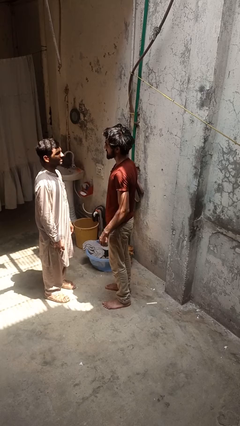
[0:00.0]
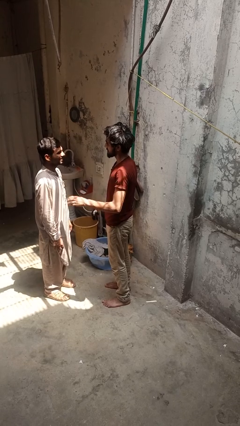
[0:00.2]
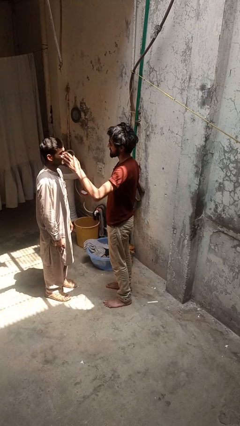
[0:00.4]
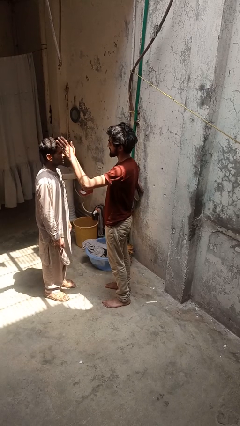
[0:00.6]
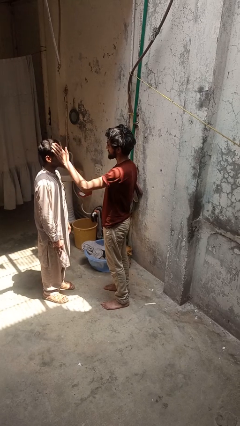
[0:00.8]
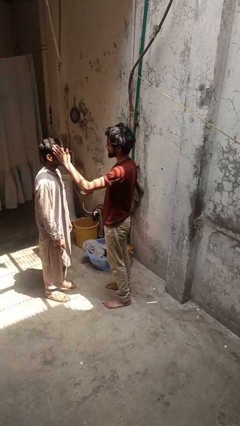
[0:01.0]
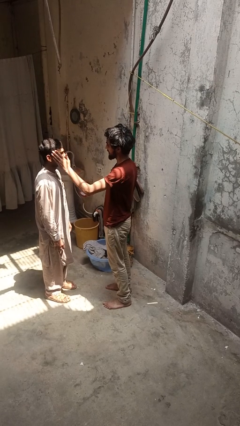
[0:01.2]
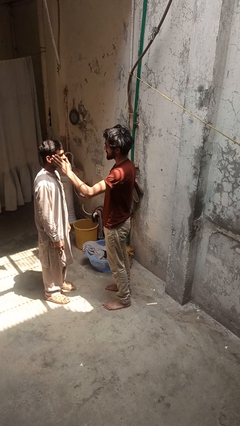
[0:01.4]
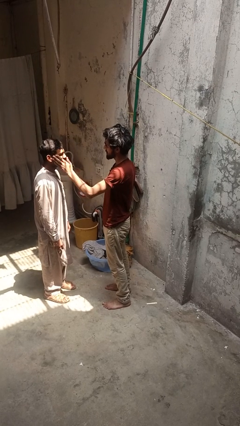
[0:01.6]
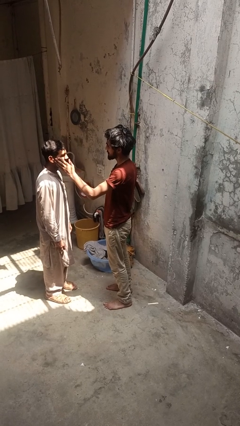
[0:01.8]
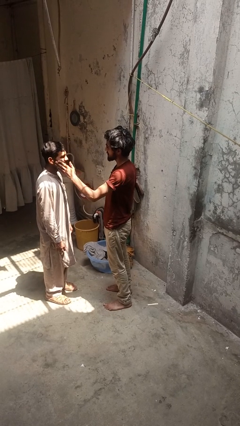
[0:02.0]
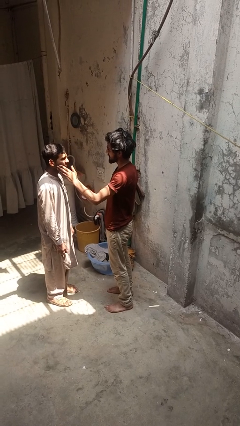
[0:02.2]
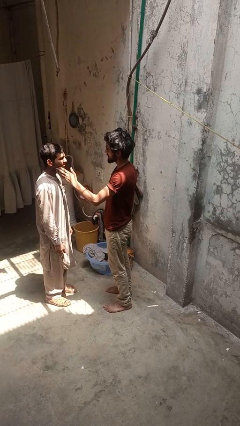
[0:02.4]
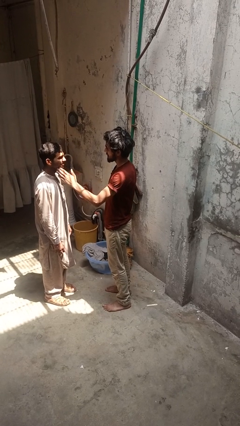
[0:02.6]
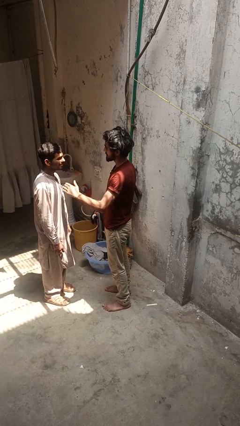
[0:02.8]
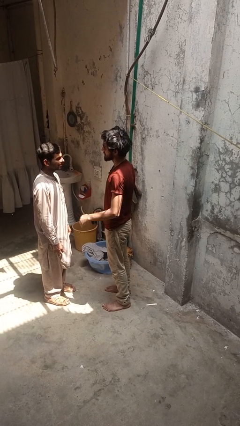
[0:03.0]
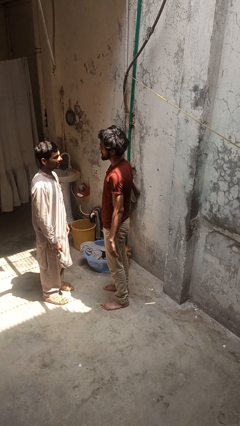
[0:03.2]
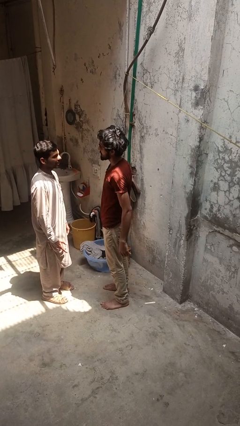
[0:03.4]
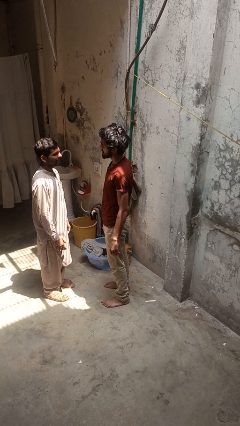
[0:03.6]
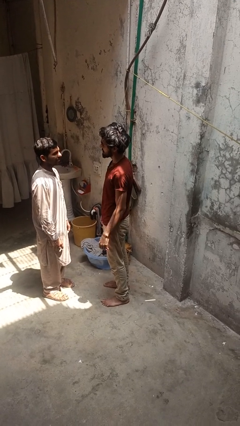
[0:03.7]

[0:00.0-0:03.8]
person touches face of person

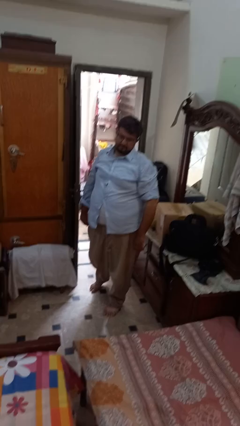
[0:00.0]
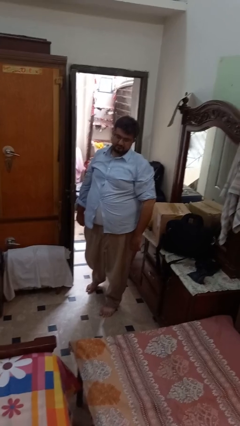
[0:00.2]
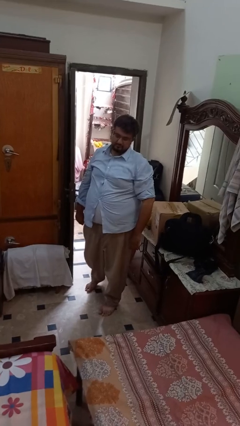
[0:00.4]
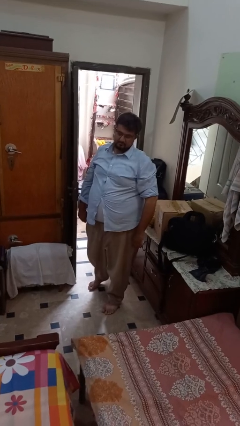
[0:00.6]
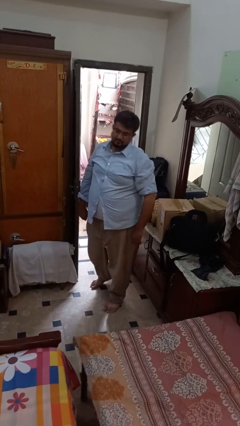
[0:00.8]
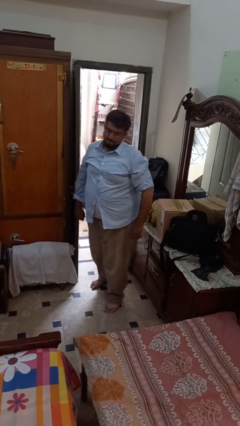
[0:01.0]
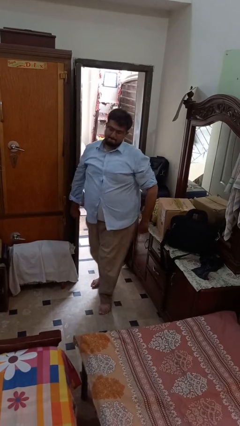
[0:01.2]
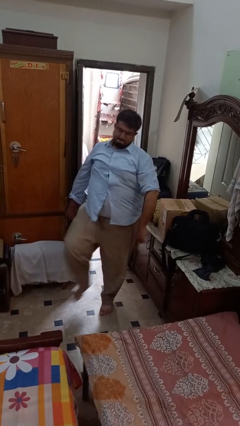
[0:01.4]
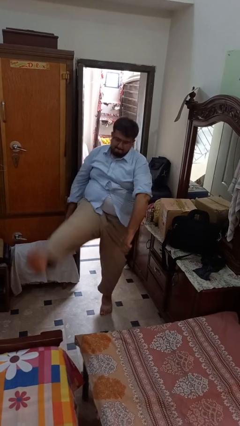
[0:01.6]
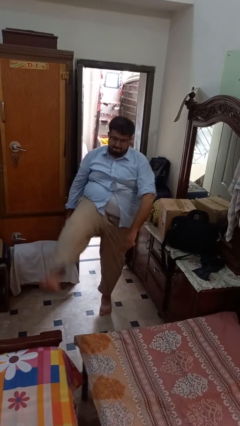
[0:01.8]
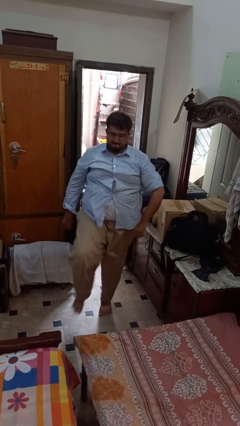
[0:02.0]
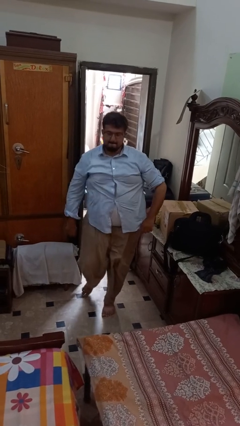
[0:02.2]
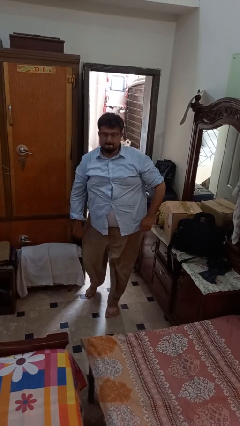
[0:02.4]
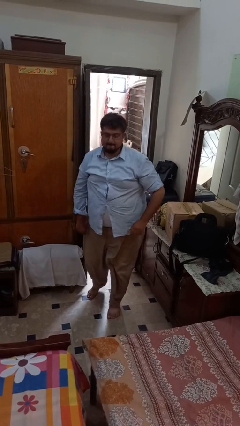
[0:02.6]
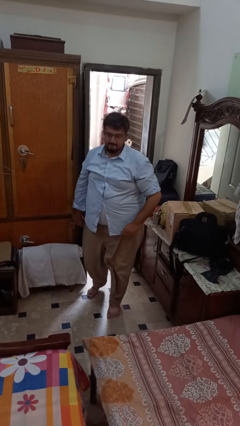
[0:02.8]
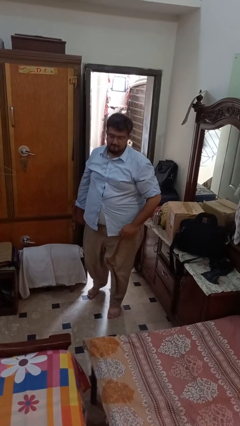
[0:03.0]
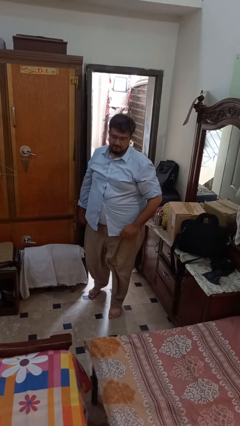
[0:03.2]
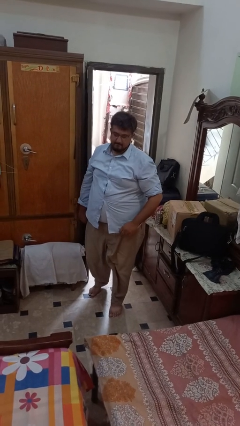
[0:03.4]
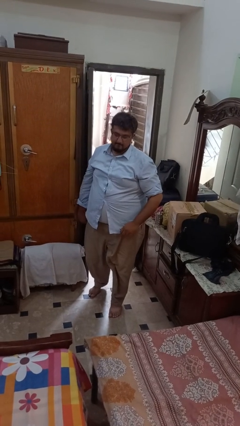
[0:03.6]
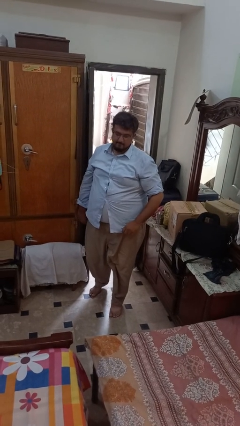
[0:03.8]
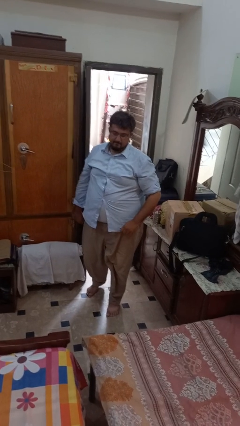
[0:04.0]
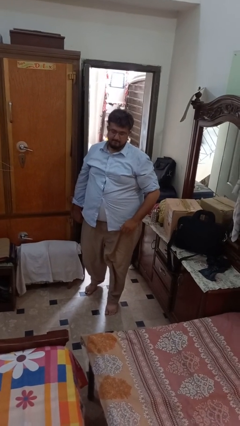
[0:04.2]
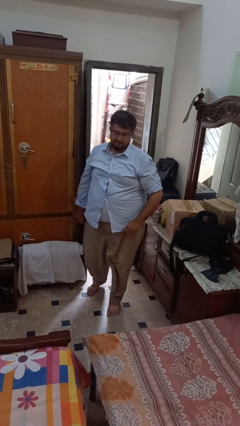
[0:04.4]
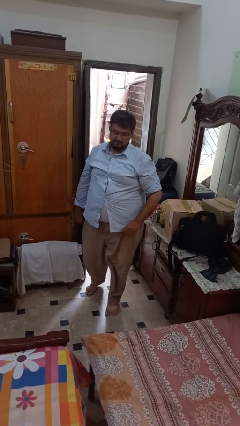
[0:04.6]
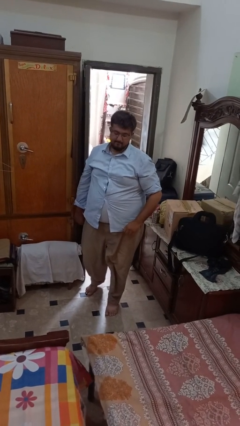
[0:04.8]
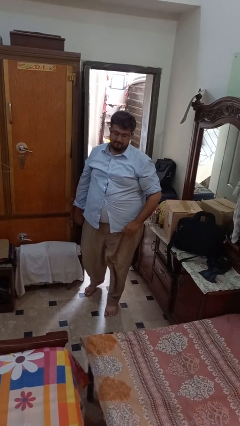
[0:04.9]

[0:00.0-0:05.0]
person karate kicks

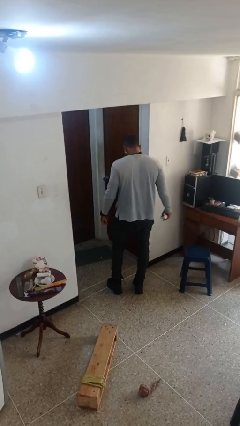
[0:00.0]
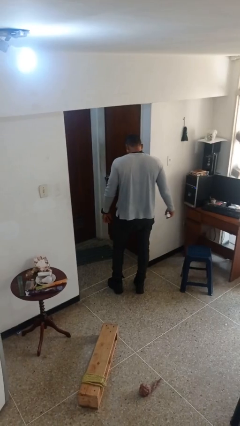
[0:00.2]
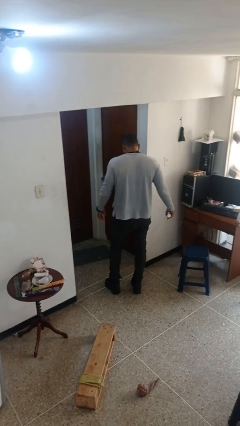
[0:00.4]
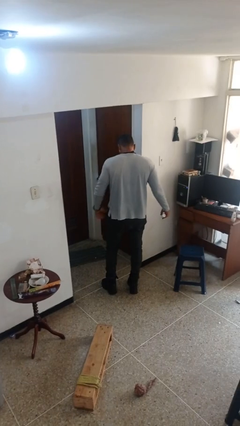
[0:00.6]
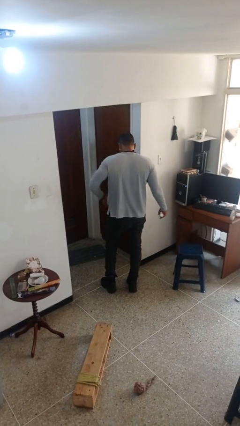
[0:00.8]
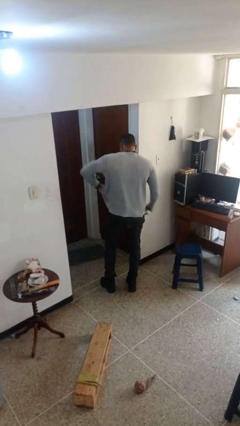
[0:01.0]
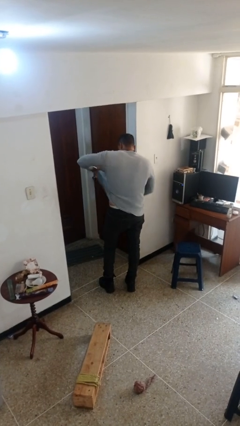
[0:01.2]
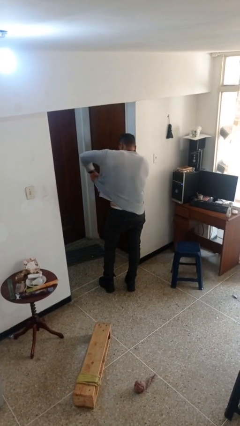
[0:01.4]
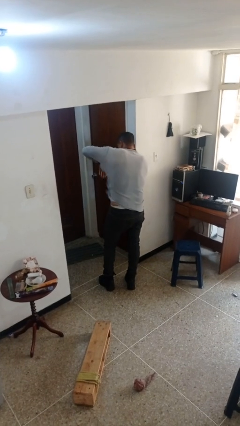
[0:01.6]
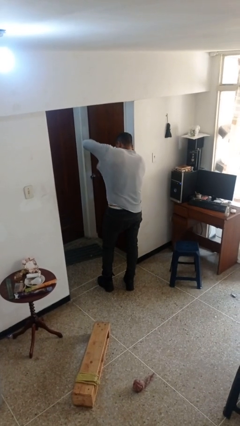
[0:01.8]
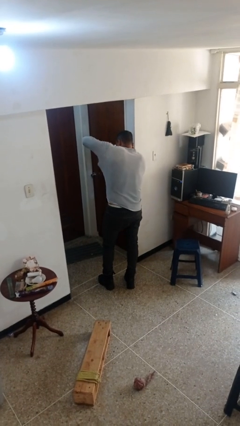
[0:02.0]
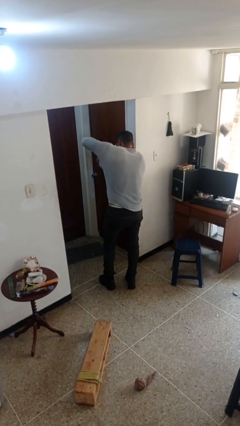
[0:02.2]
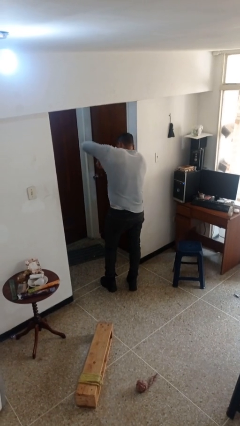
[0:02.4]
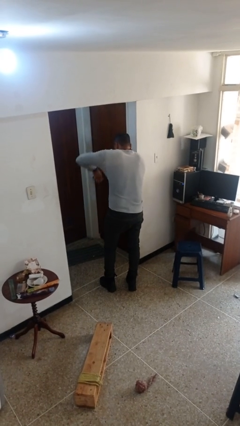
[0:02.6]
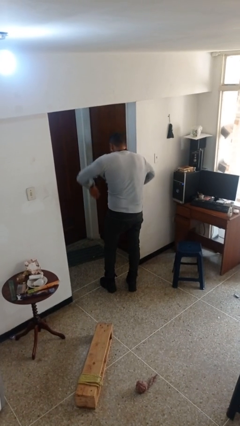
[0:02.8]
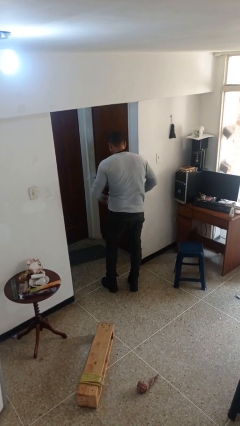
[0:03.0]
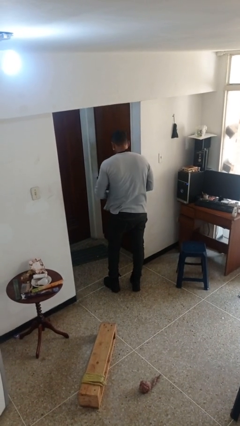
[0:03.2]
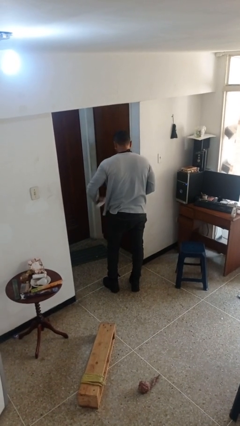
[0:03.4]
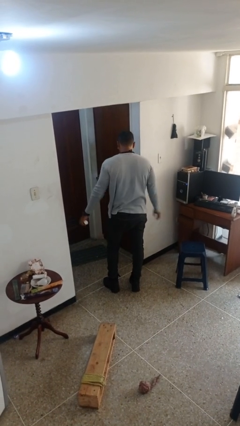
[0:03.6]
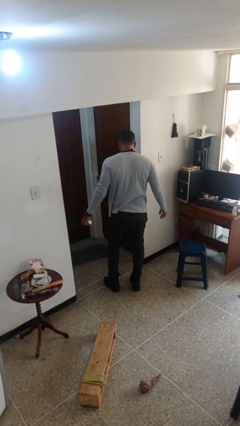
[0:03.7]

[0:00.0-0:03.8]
person applies deodorant

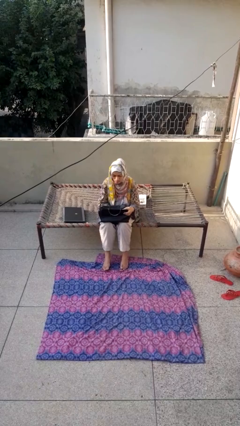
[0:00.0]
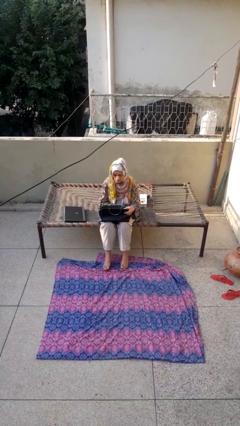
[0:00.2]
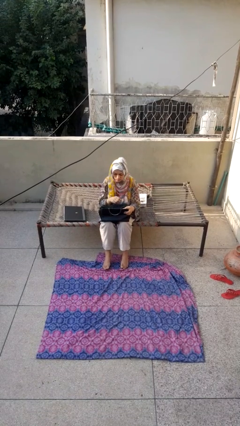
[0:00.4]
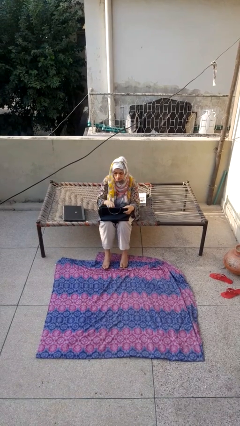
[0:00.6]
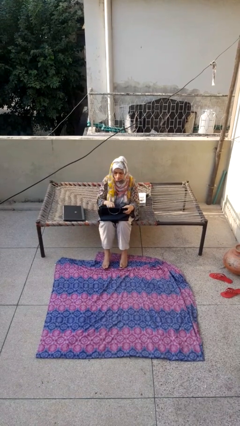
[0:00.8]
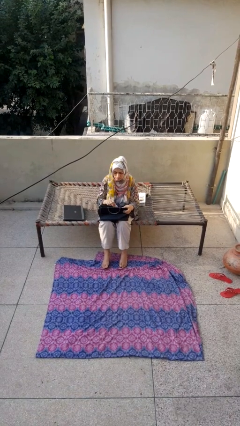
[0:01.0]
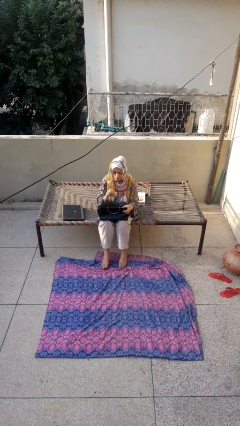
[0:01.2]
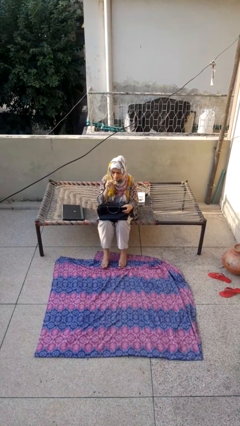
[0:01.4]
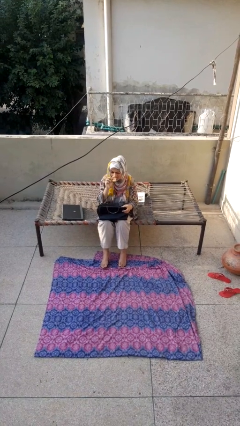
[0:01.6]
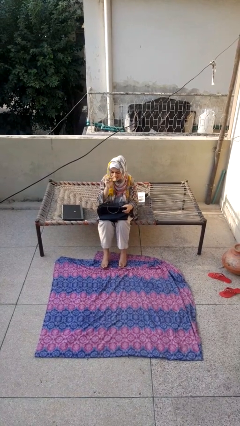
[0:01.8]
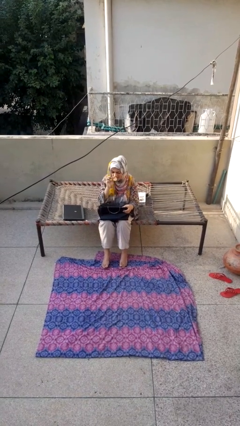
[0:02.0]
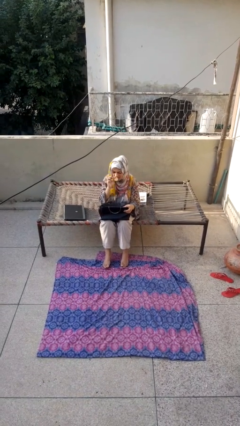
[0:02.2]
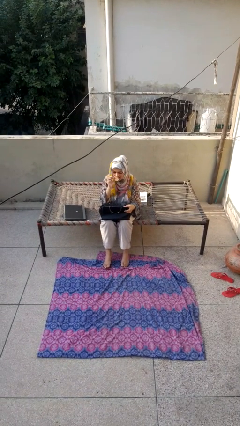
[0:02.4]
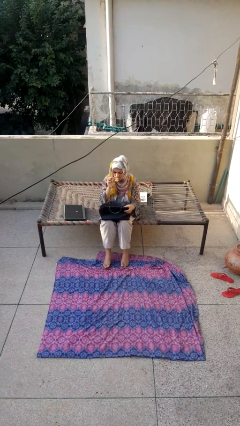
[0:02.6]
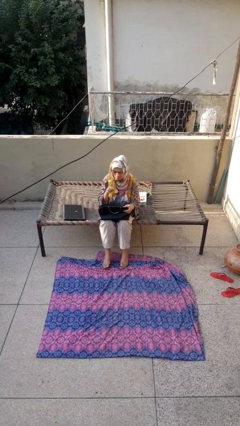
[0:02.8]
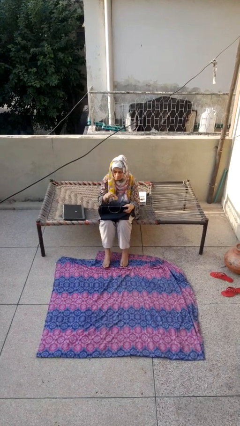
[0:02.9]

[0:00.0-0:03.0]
person eats snack from bag

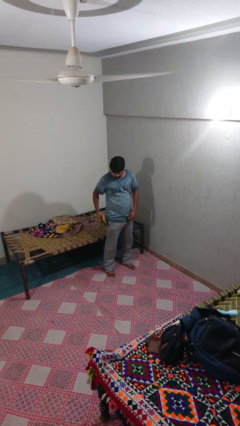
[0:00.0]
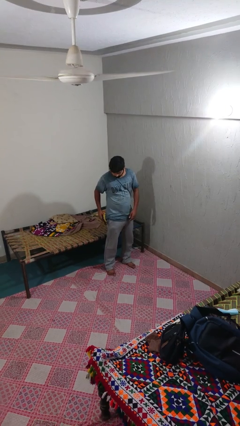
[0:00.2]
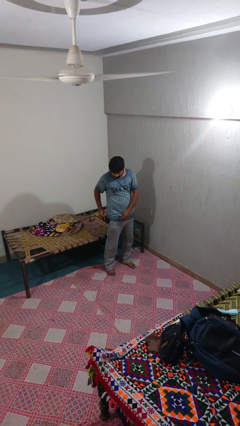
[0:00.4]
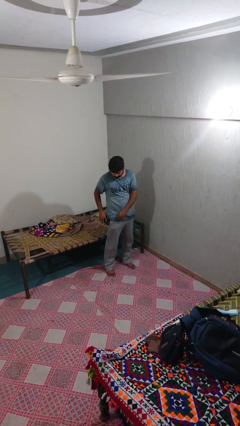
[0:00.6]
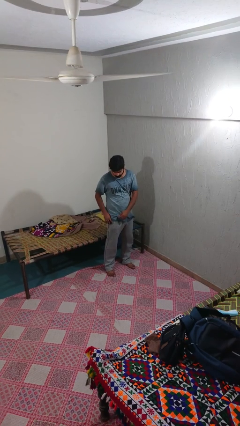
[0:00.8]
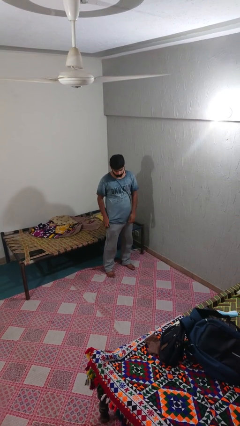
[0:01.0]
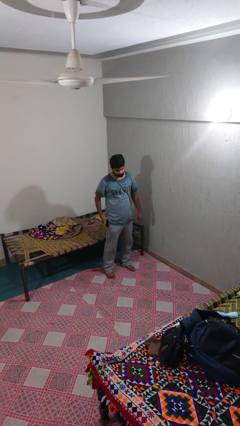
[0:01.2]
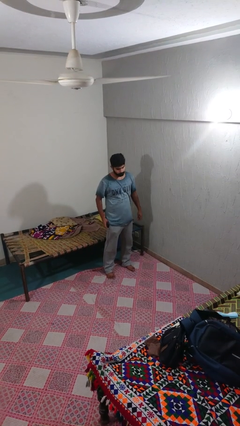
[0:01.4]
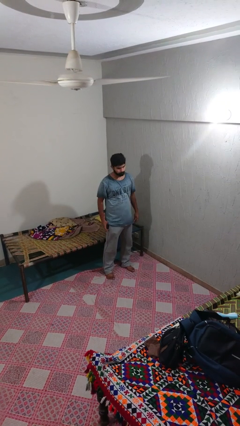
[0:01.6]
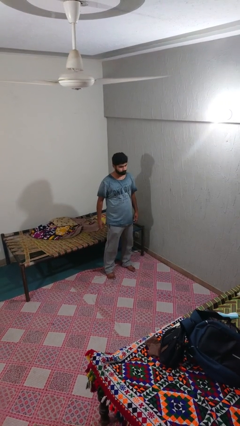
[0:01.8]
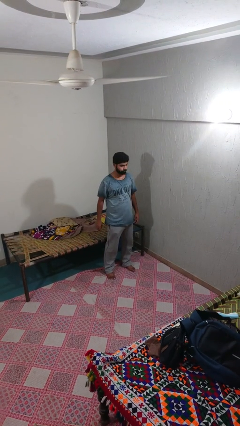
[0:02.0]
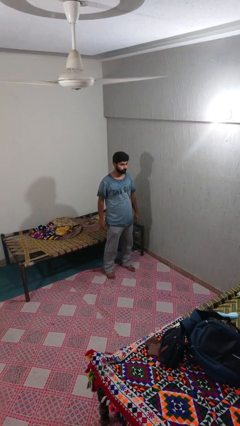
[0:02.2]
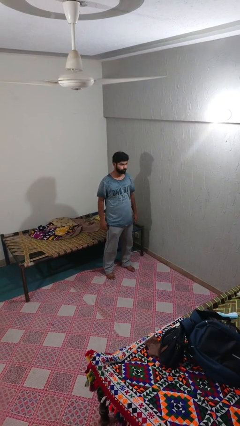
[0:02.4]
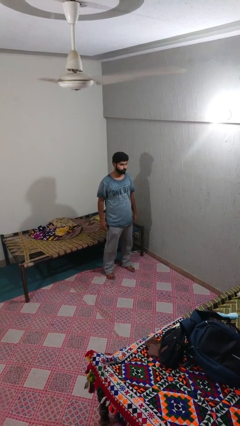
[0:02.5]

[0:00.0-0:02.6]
person puts phone into pocket
